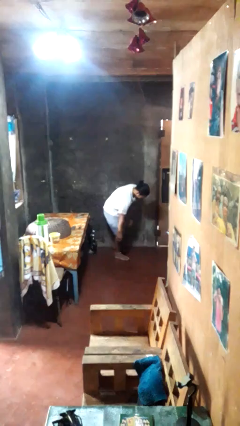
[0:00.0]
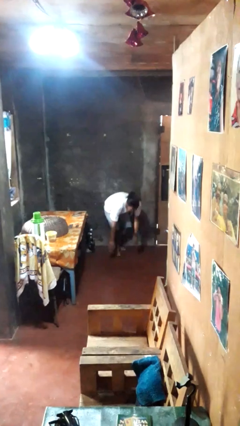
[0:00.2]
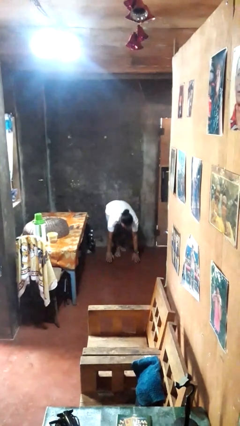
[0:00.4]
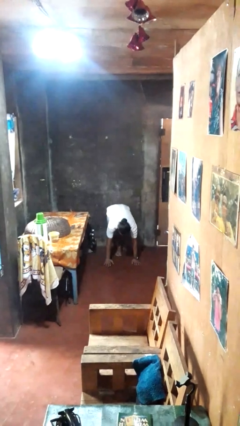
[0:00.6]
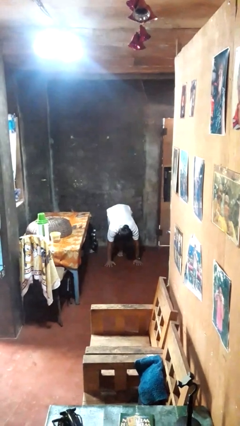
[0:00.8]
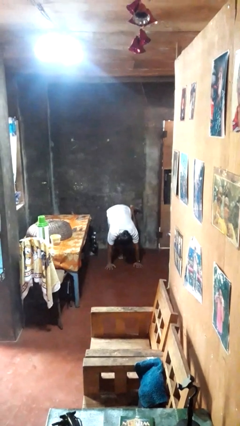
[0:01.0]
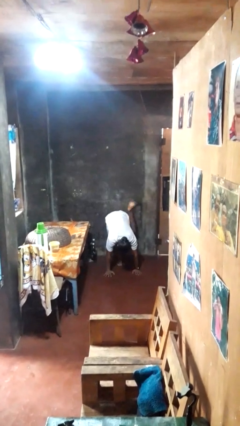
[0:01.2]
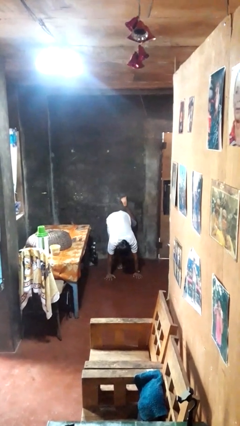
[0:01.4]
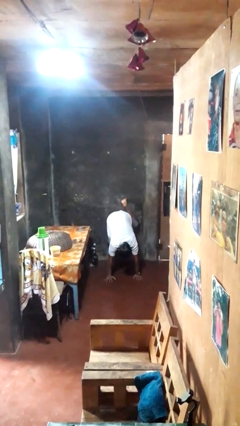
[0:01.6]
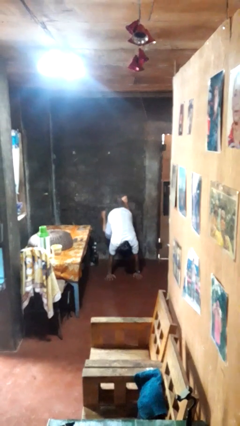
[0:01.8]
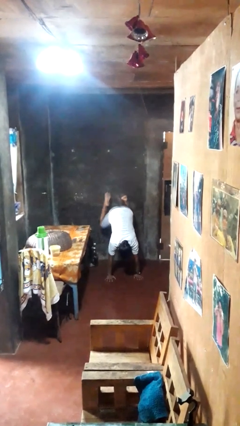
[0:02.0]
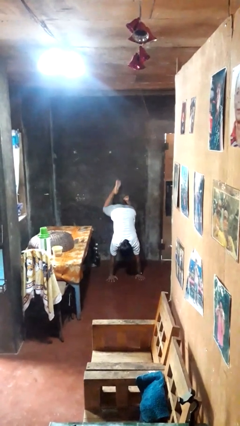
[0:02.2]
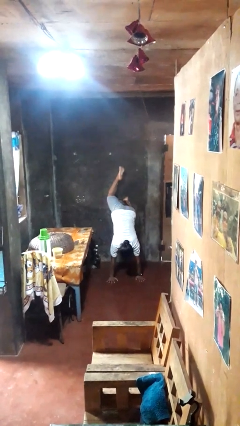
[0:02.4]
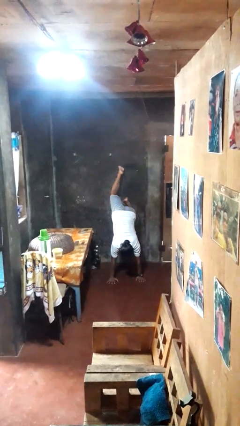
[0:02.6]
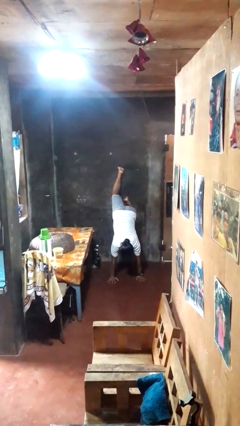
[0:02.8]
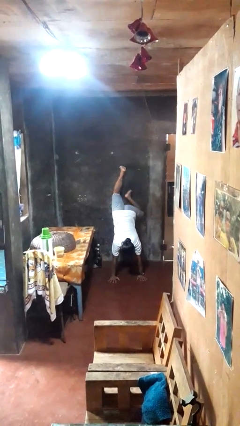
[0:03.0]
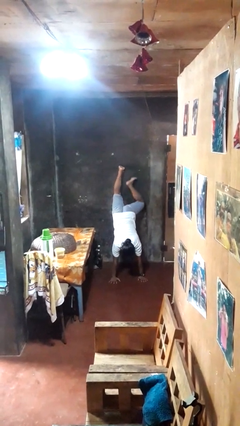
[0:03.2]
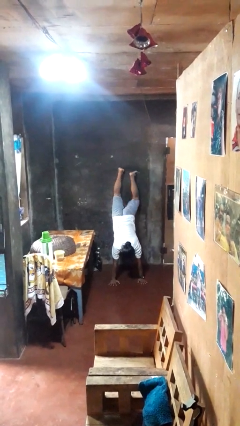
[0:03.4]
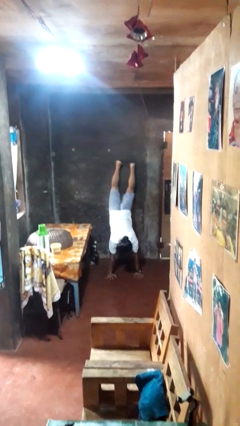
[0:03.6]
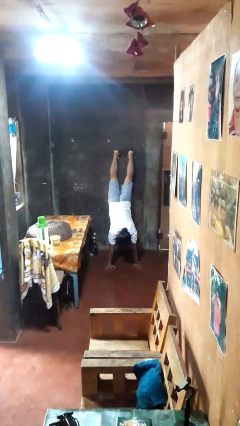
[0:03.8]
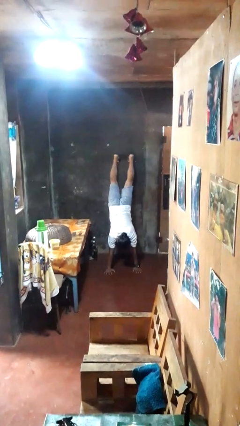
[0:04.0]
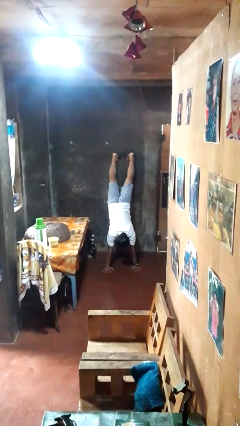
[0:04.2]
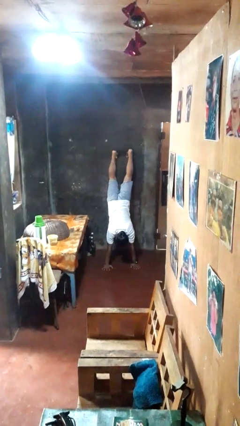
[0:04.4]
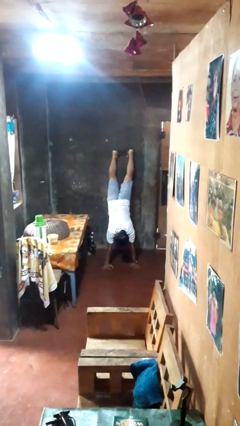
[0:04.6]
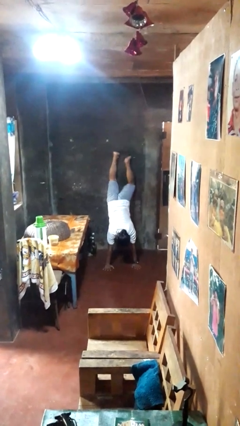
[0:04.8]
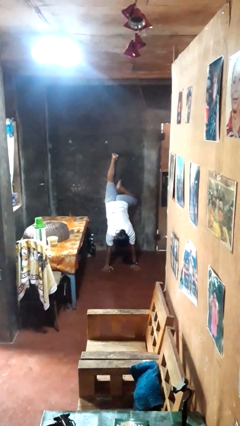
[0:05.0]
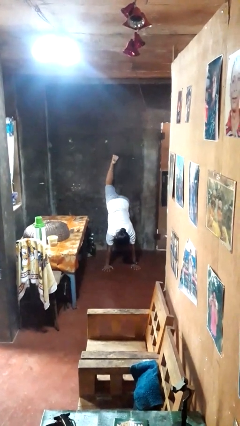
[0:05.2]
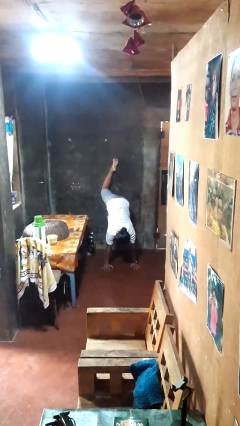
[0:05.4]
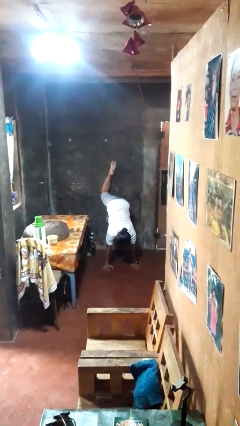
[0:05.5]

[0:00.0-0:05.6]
person handstand

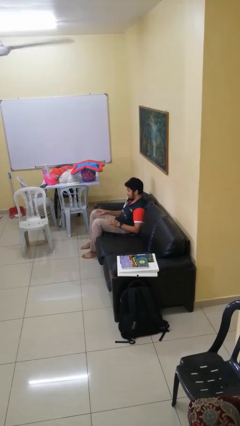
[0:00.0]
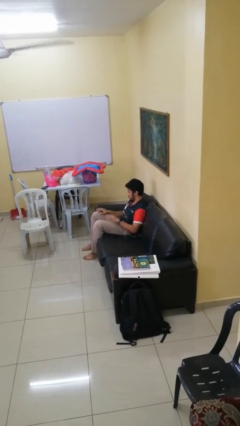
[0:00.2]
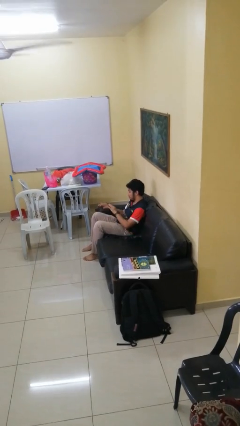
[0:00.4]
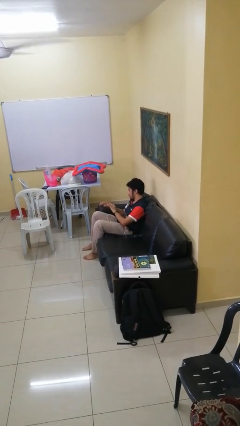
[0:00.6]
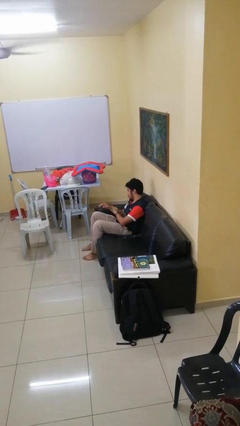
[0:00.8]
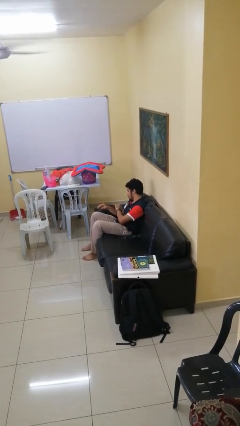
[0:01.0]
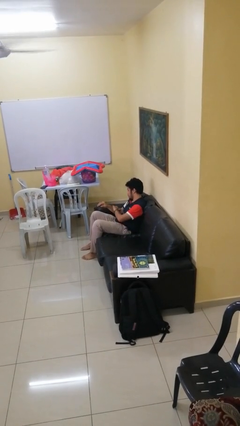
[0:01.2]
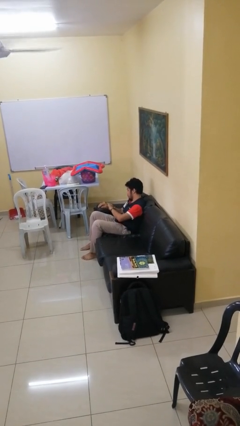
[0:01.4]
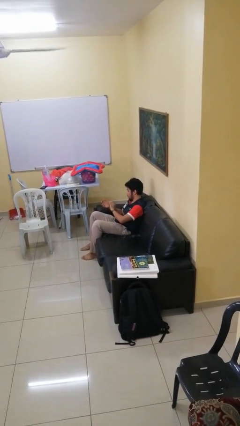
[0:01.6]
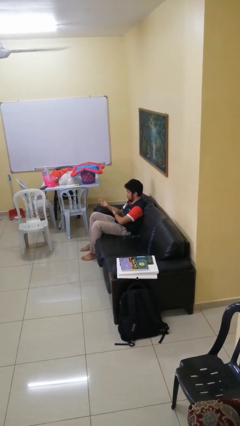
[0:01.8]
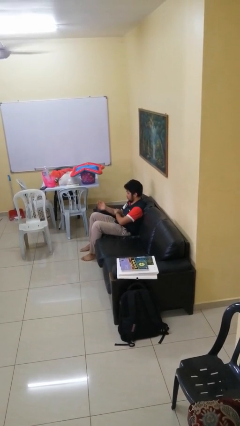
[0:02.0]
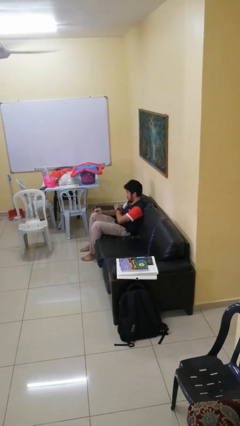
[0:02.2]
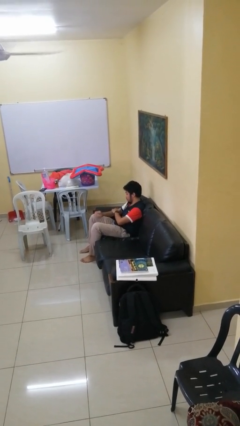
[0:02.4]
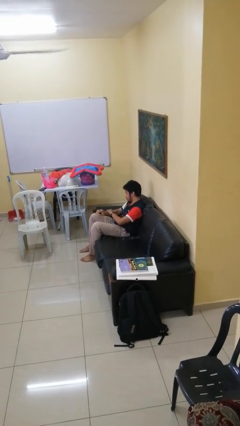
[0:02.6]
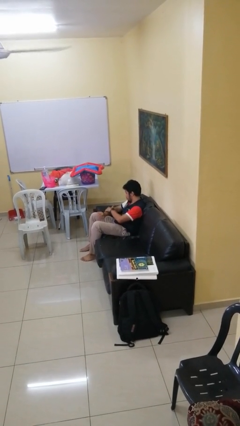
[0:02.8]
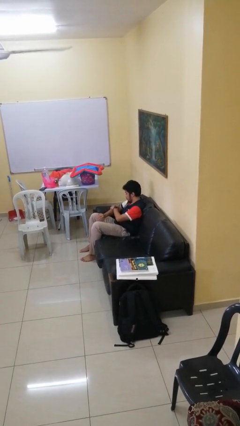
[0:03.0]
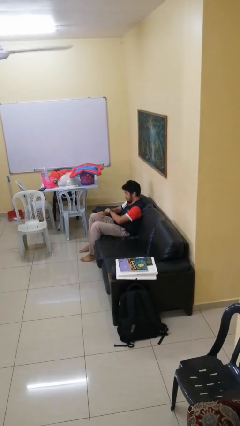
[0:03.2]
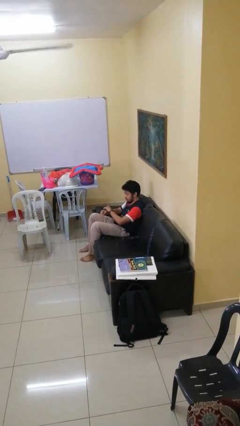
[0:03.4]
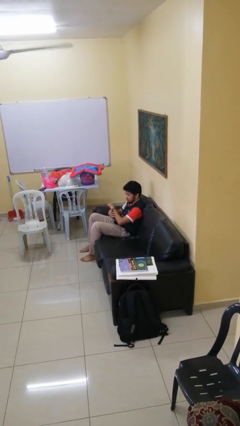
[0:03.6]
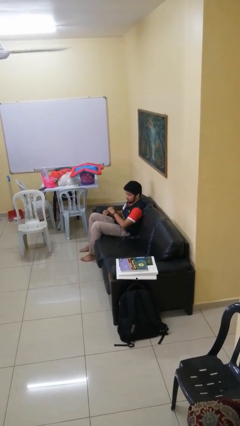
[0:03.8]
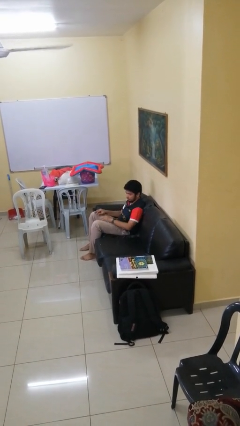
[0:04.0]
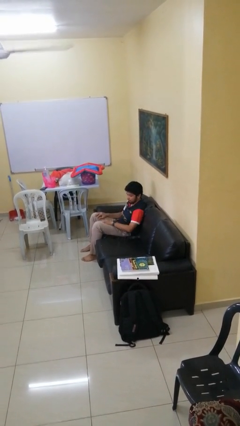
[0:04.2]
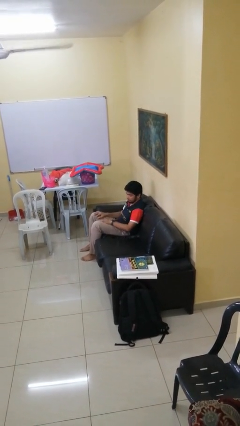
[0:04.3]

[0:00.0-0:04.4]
person looks at hands in lap

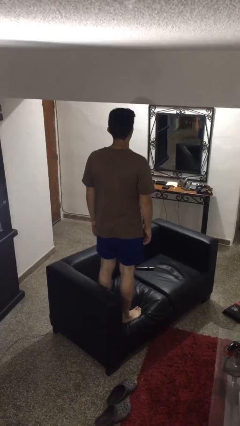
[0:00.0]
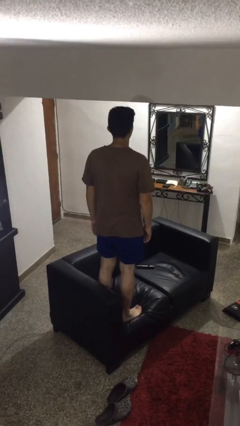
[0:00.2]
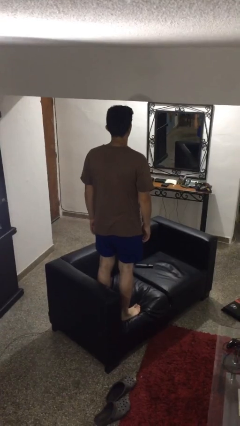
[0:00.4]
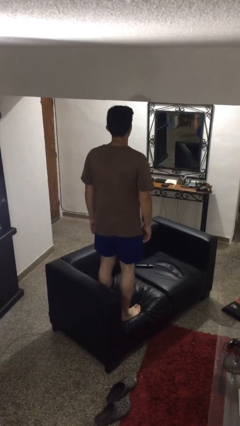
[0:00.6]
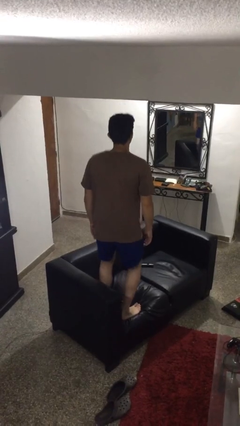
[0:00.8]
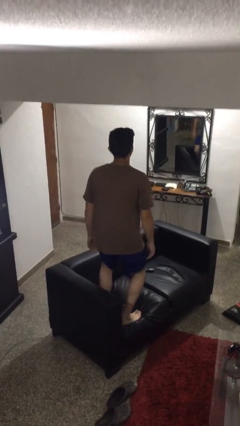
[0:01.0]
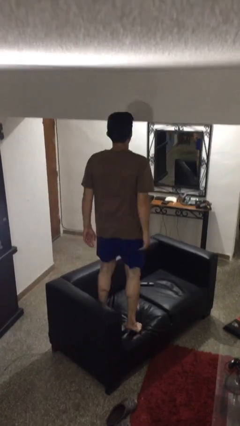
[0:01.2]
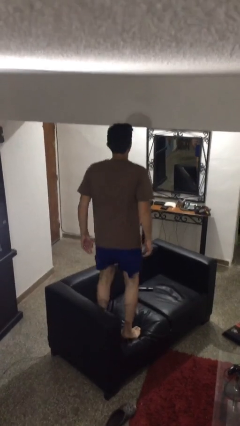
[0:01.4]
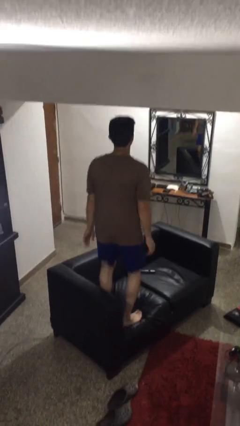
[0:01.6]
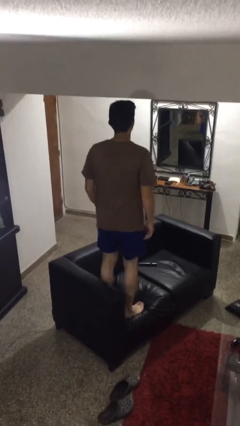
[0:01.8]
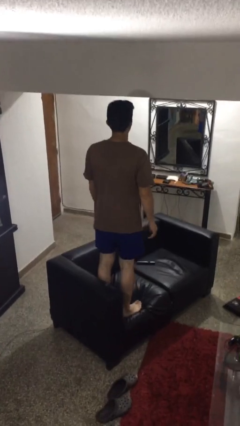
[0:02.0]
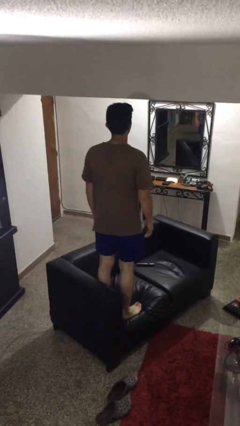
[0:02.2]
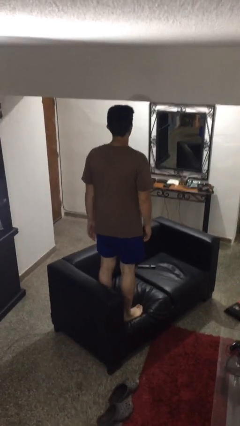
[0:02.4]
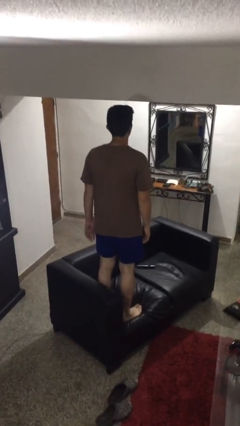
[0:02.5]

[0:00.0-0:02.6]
person jumps on couch

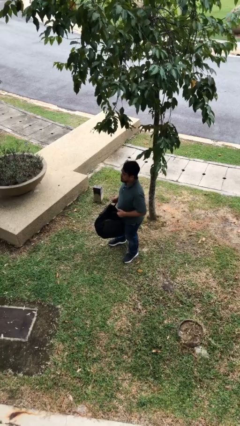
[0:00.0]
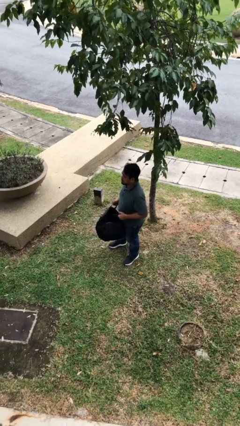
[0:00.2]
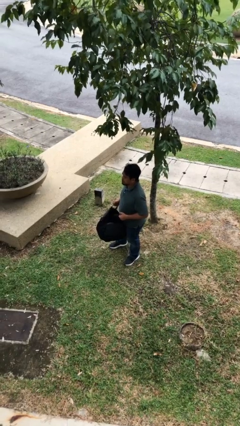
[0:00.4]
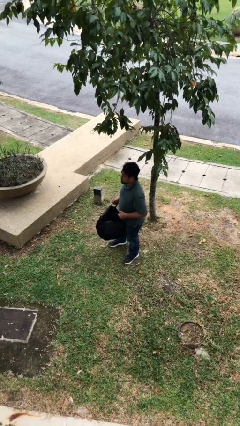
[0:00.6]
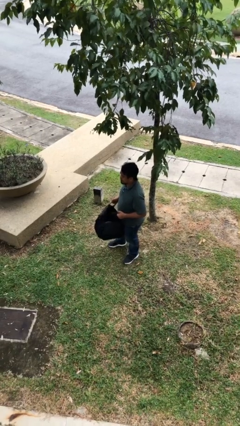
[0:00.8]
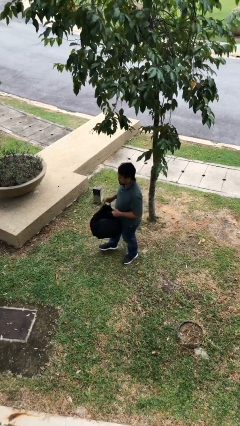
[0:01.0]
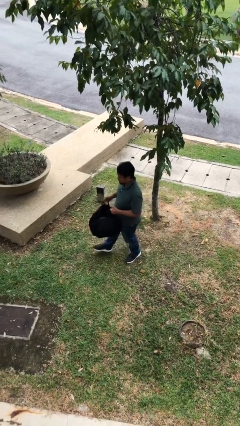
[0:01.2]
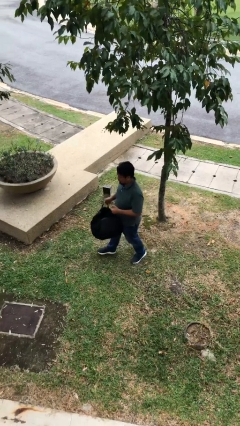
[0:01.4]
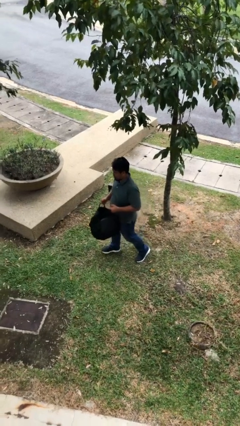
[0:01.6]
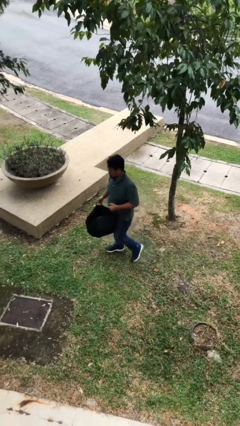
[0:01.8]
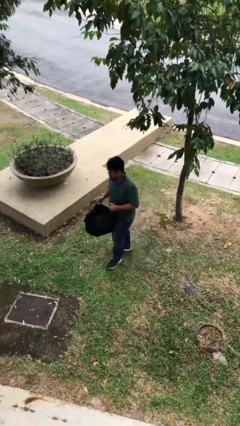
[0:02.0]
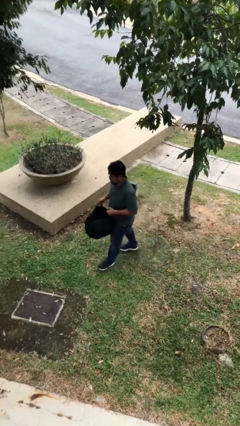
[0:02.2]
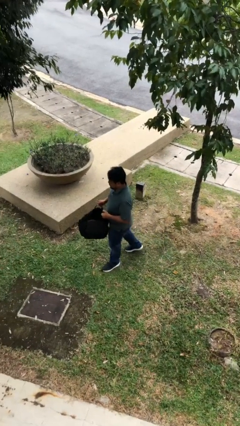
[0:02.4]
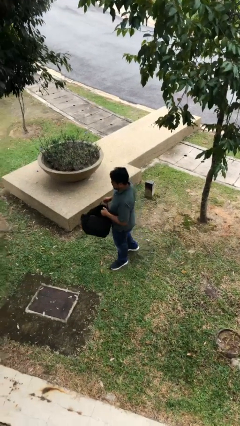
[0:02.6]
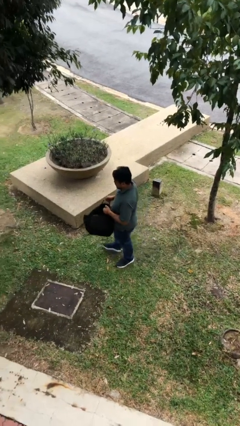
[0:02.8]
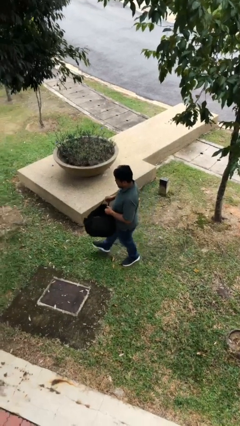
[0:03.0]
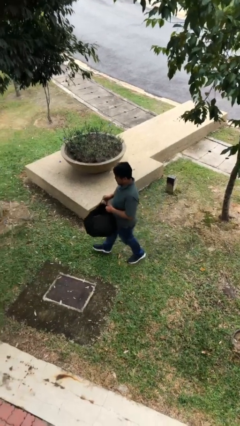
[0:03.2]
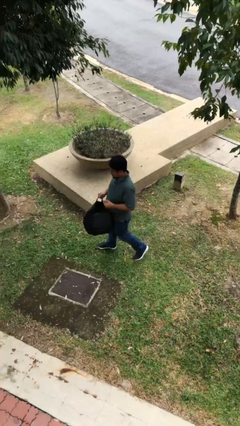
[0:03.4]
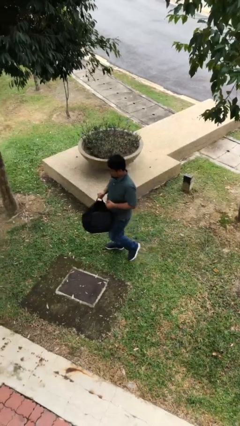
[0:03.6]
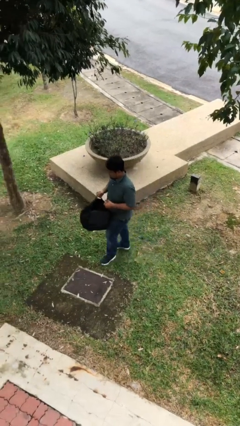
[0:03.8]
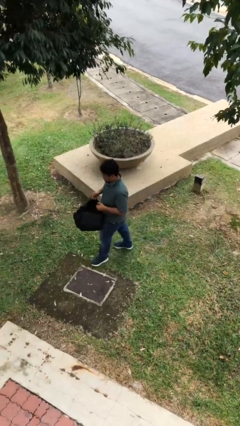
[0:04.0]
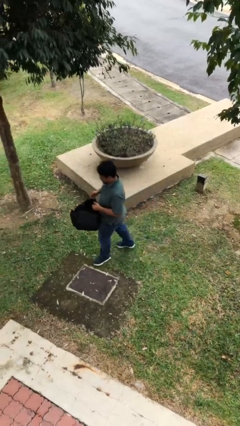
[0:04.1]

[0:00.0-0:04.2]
person carries heavy object

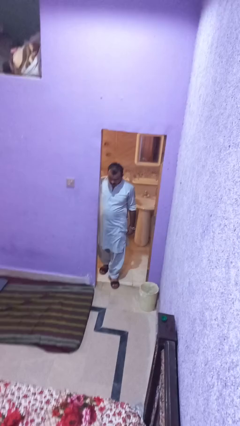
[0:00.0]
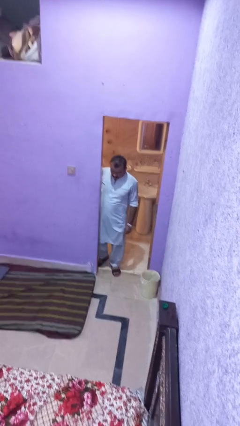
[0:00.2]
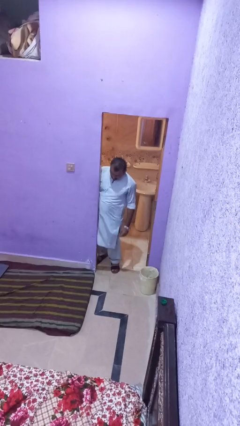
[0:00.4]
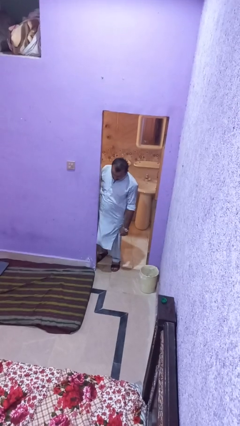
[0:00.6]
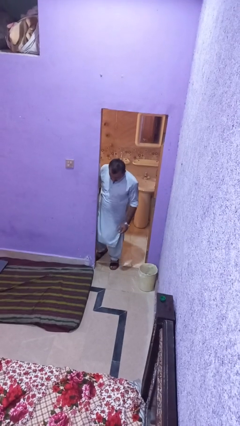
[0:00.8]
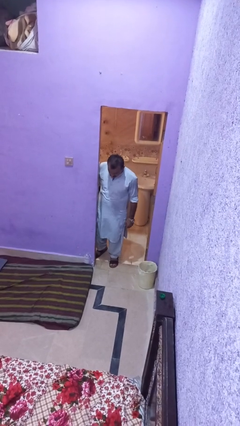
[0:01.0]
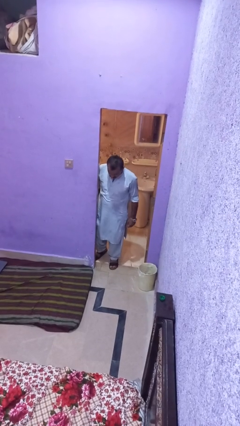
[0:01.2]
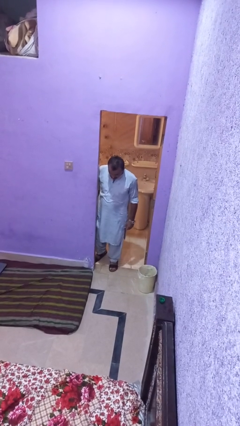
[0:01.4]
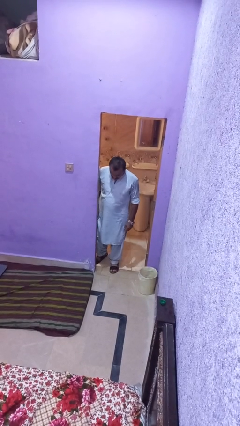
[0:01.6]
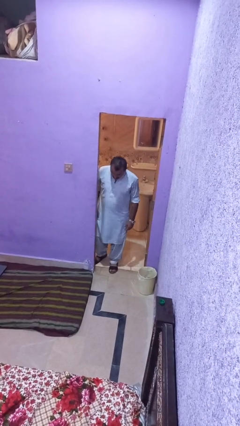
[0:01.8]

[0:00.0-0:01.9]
person bumps into wall
